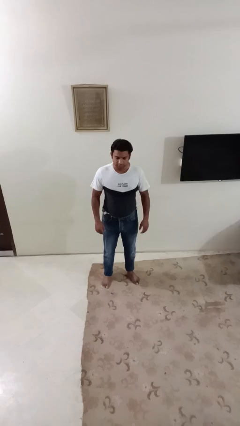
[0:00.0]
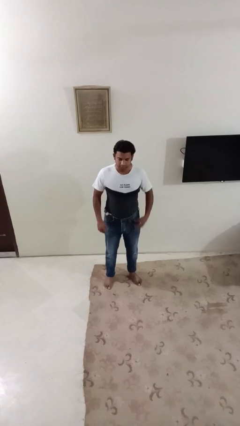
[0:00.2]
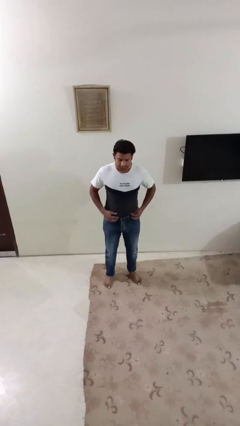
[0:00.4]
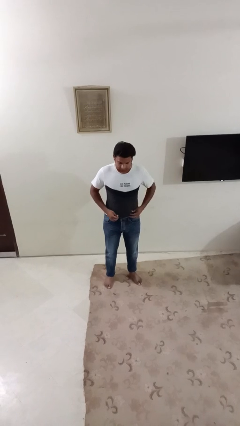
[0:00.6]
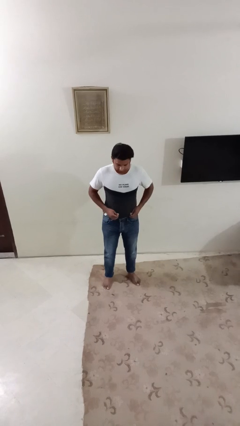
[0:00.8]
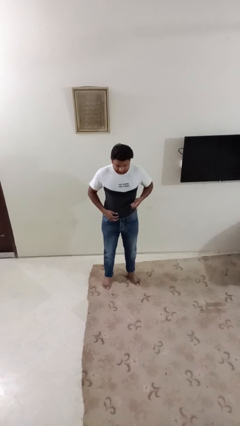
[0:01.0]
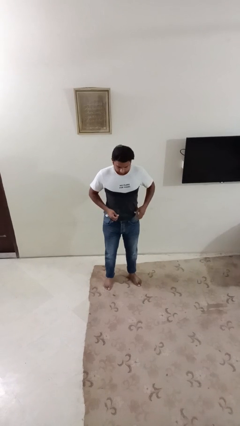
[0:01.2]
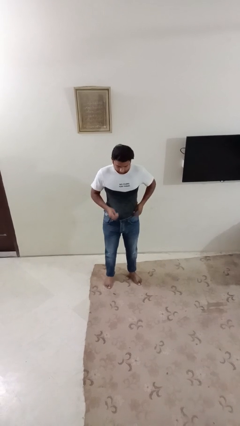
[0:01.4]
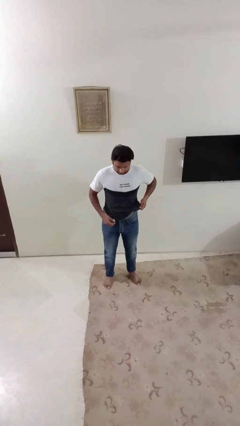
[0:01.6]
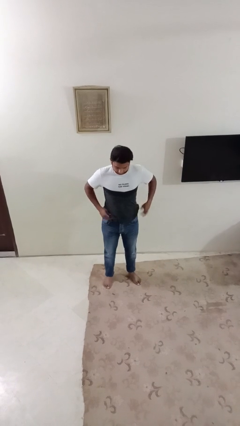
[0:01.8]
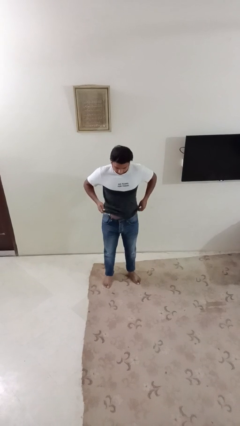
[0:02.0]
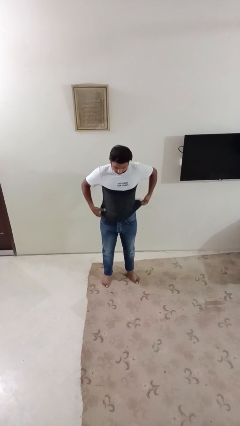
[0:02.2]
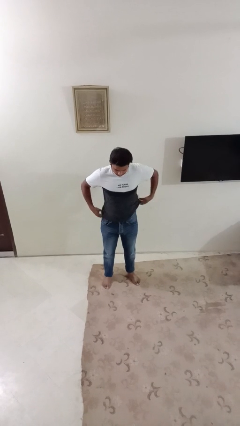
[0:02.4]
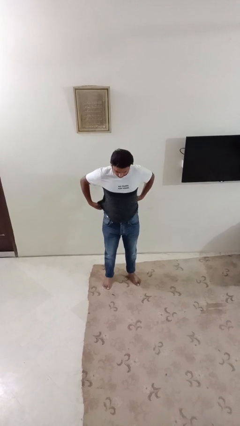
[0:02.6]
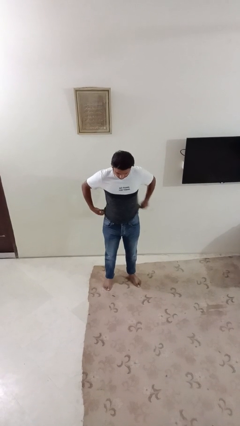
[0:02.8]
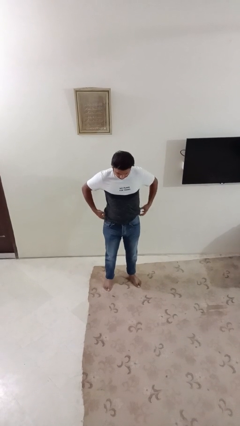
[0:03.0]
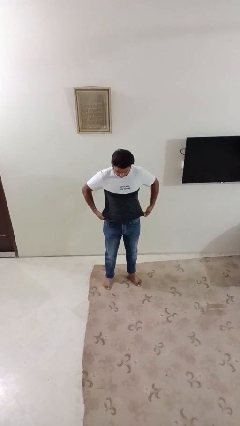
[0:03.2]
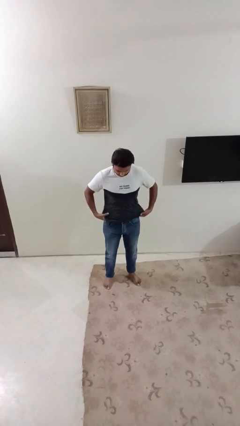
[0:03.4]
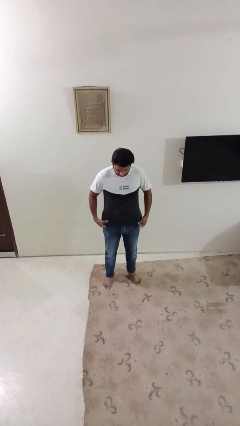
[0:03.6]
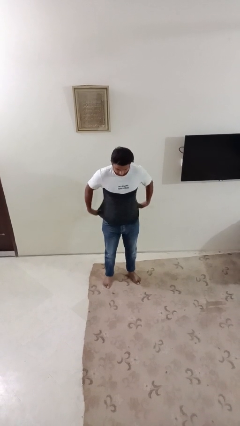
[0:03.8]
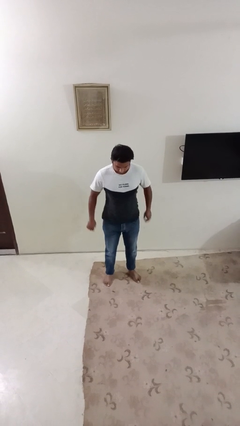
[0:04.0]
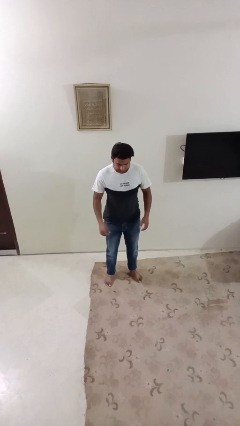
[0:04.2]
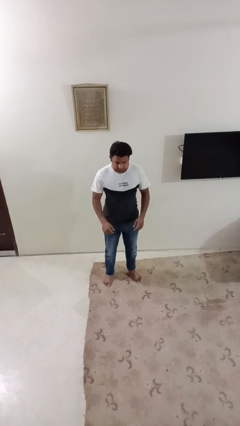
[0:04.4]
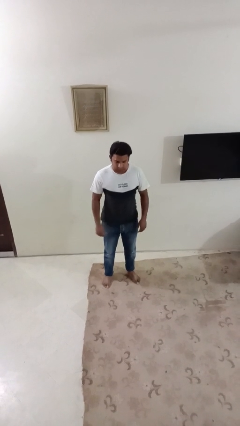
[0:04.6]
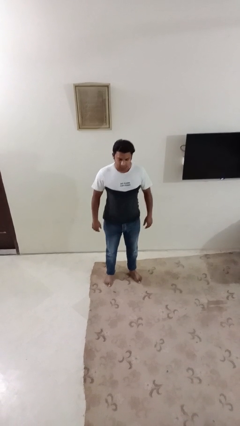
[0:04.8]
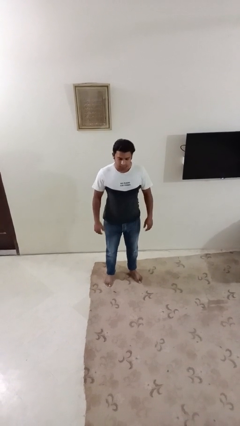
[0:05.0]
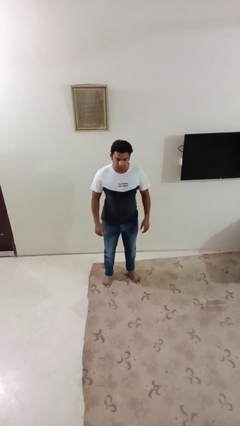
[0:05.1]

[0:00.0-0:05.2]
person untucks shirt

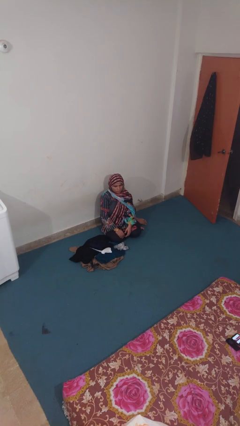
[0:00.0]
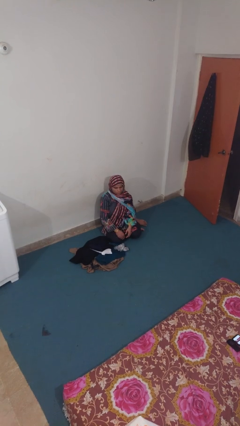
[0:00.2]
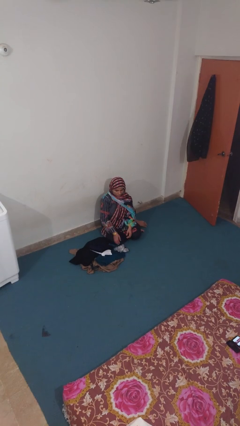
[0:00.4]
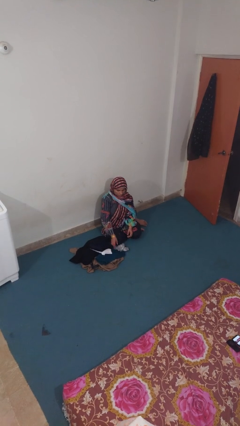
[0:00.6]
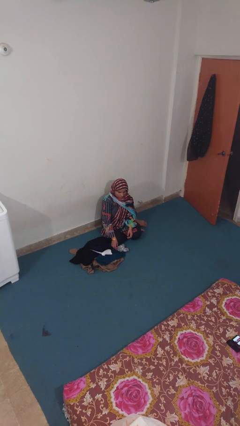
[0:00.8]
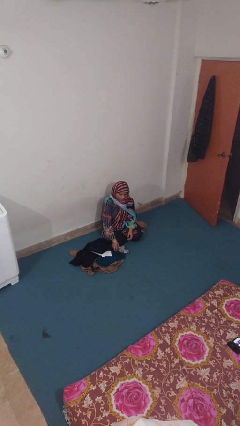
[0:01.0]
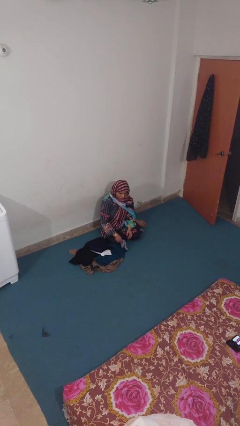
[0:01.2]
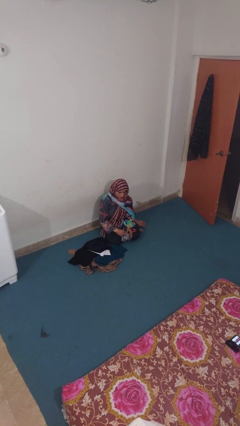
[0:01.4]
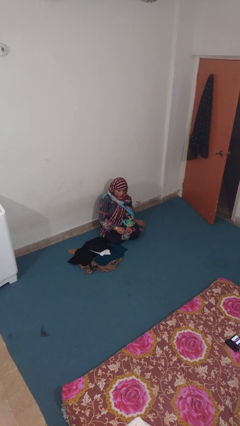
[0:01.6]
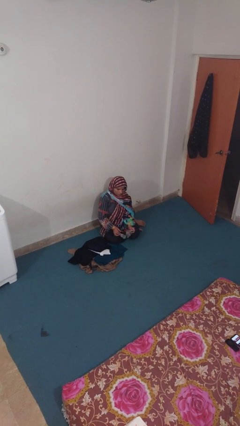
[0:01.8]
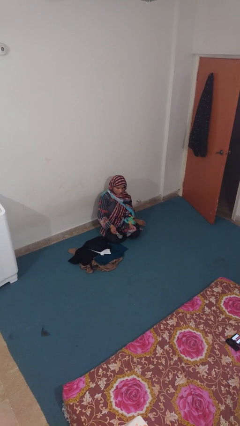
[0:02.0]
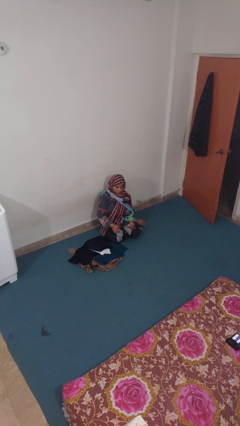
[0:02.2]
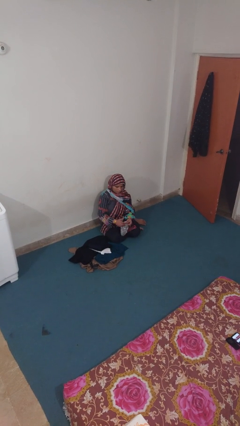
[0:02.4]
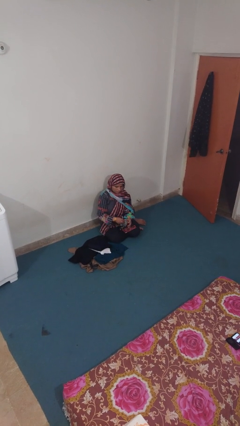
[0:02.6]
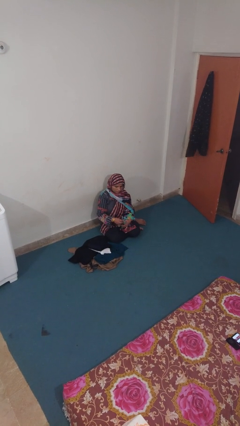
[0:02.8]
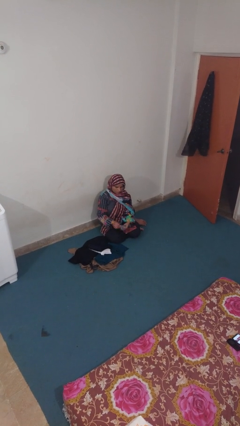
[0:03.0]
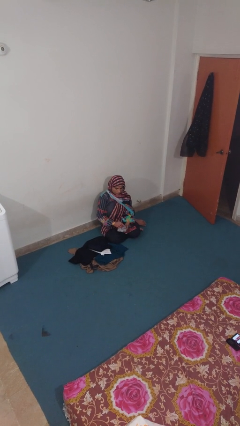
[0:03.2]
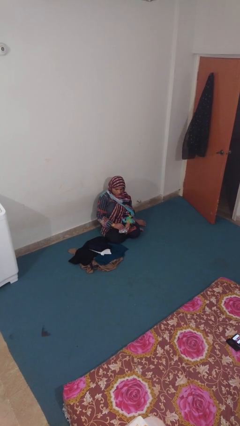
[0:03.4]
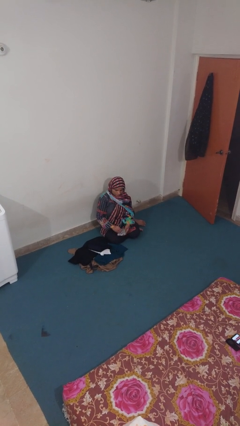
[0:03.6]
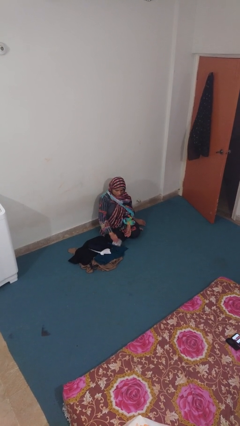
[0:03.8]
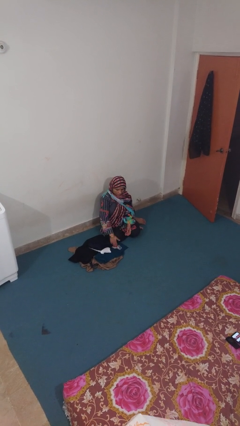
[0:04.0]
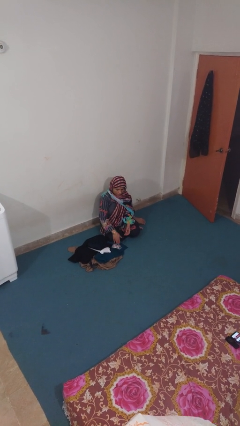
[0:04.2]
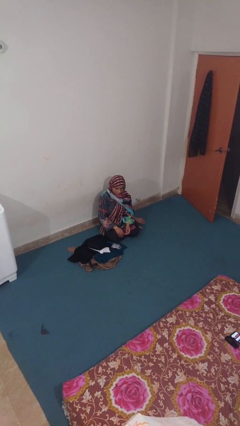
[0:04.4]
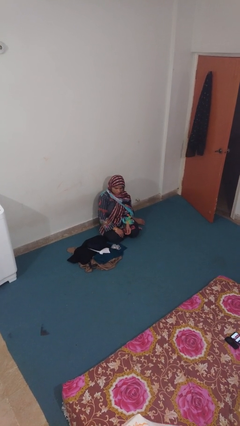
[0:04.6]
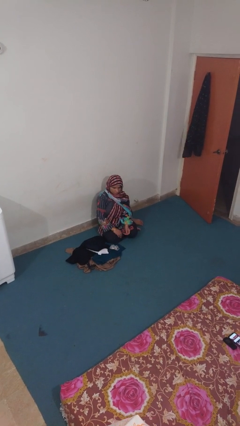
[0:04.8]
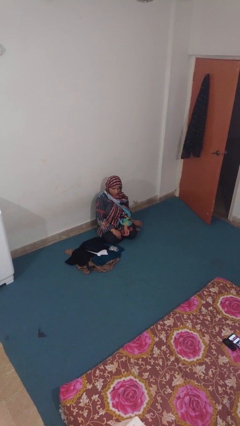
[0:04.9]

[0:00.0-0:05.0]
person folds socks

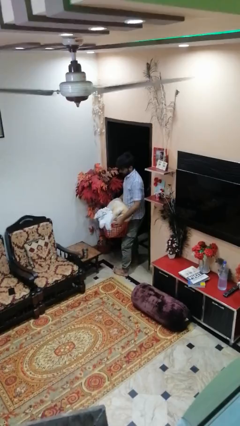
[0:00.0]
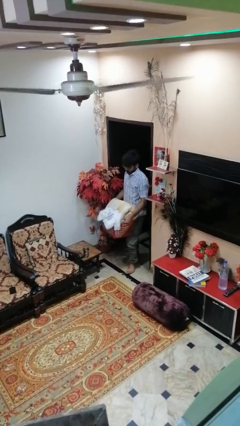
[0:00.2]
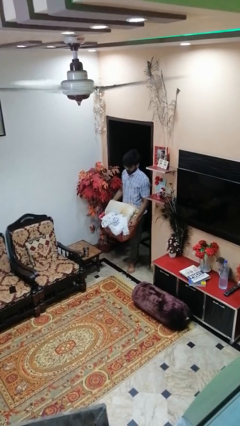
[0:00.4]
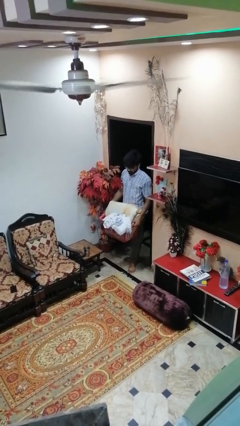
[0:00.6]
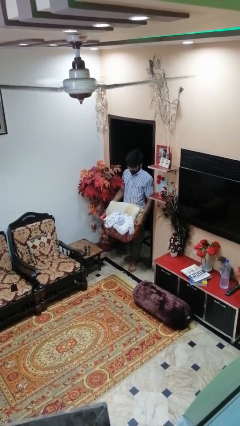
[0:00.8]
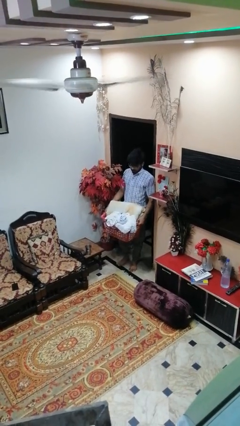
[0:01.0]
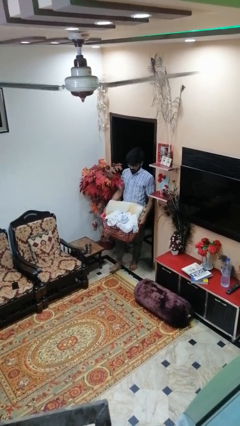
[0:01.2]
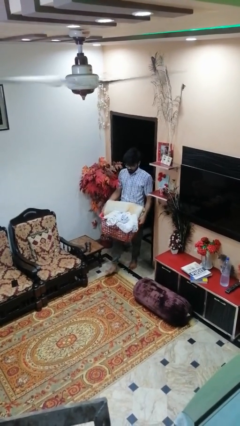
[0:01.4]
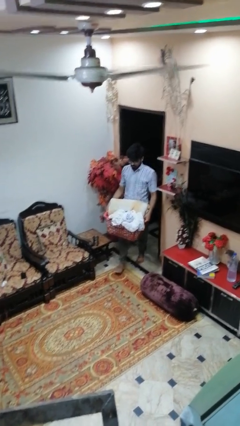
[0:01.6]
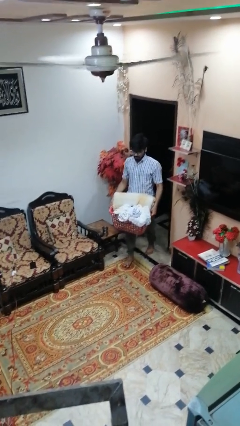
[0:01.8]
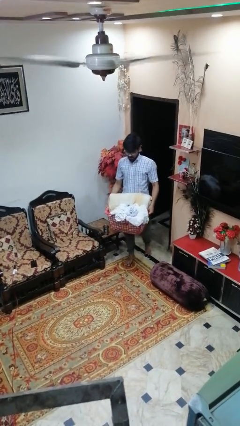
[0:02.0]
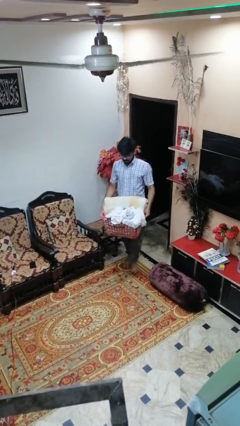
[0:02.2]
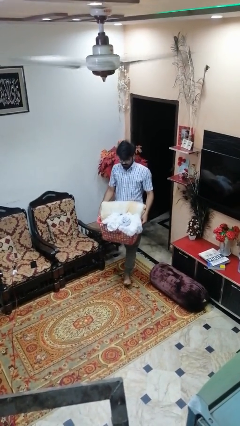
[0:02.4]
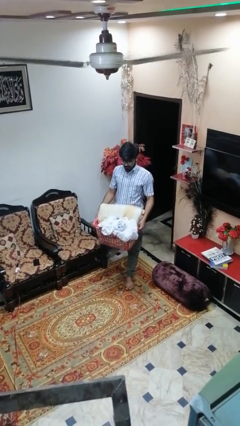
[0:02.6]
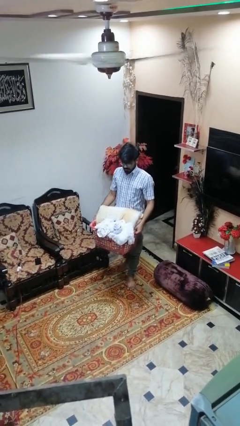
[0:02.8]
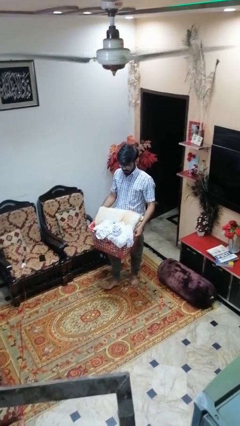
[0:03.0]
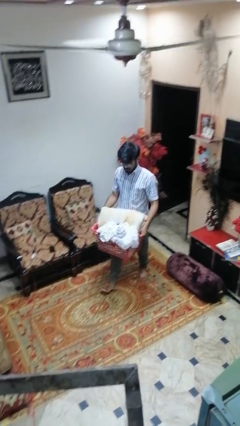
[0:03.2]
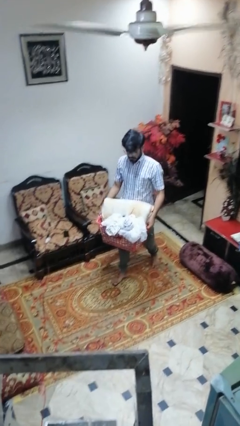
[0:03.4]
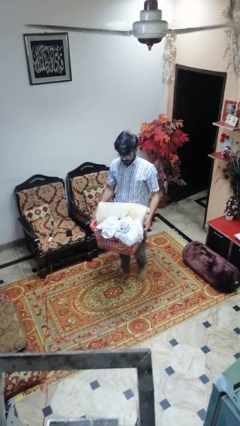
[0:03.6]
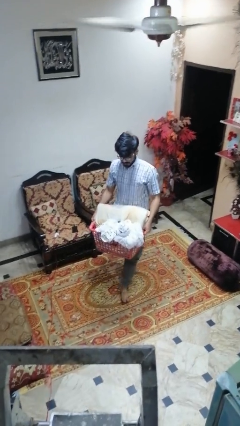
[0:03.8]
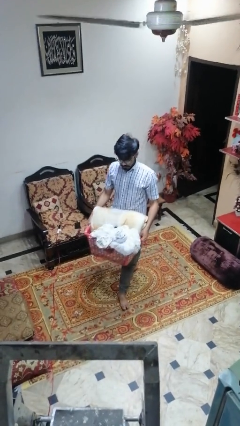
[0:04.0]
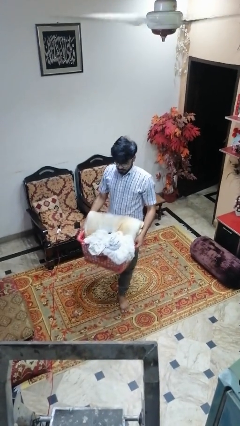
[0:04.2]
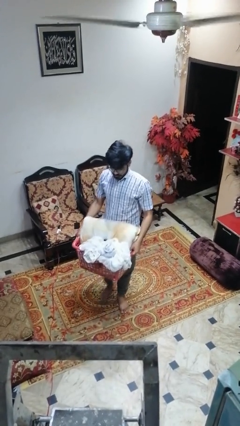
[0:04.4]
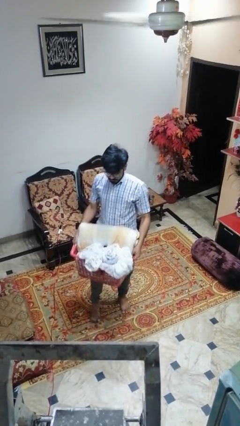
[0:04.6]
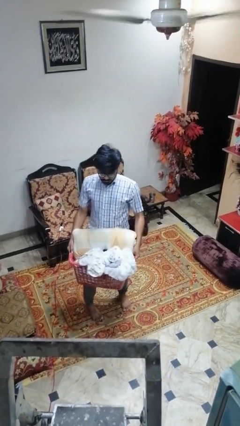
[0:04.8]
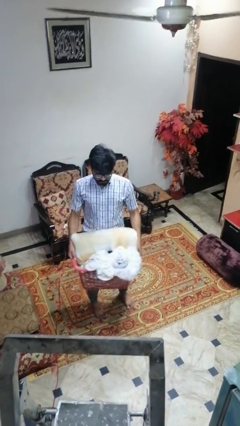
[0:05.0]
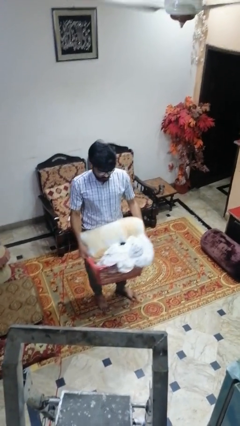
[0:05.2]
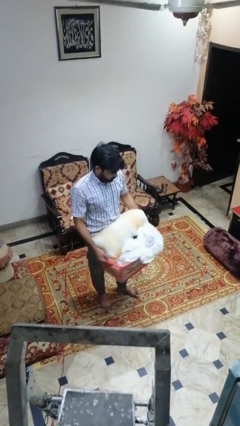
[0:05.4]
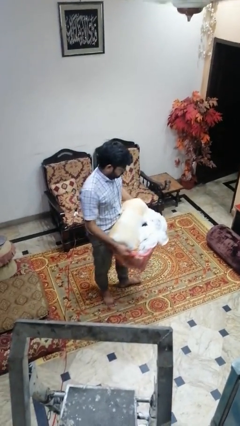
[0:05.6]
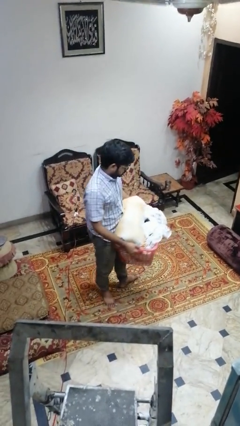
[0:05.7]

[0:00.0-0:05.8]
person carries laundry basket

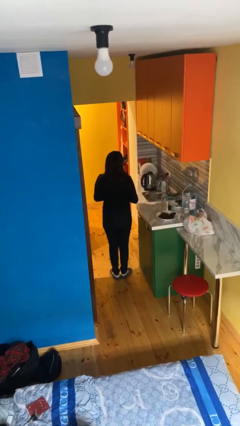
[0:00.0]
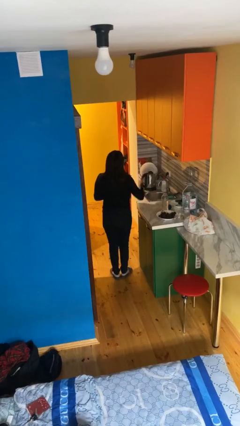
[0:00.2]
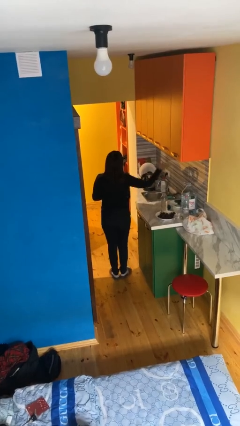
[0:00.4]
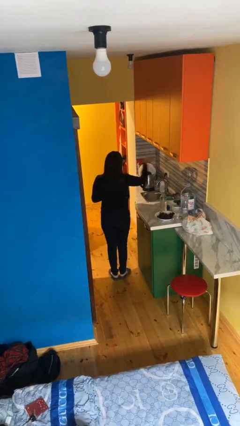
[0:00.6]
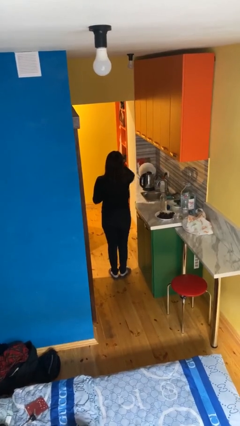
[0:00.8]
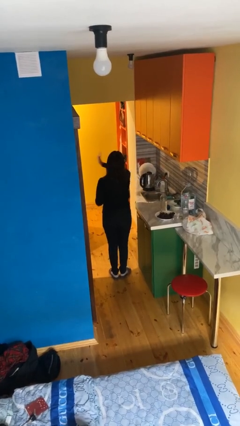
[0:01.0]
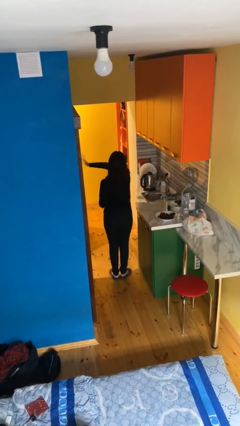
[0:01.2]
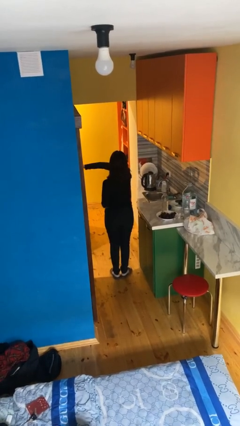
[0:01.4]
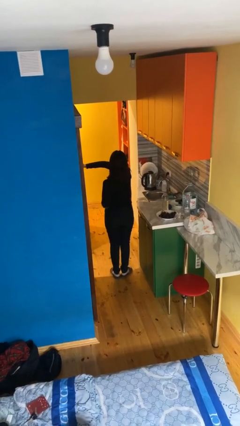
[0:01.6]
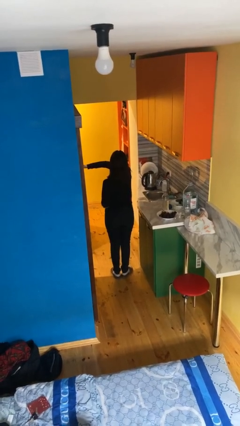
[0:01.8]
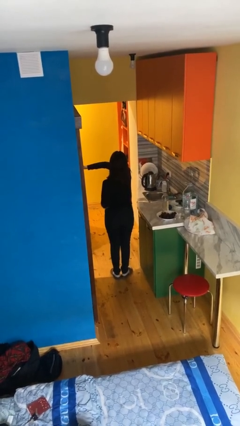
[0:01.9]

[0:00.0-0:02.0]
person gestures swipe left
